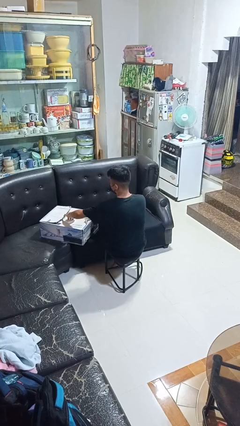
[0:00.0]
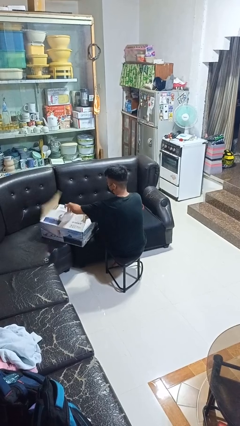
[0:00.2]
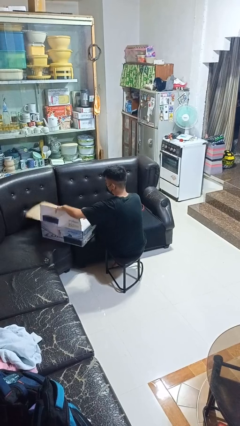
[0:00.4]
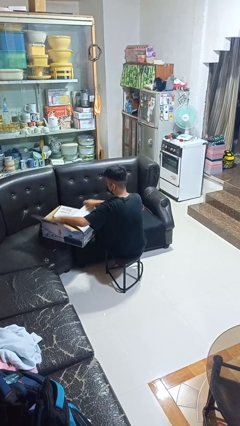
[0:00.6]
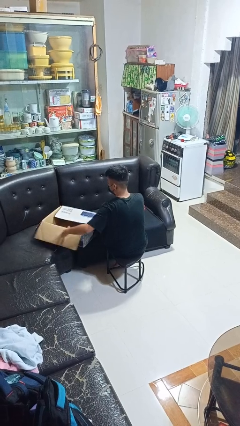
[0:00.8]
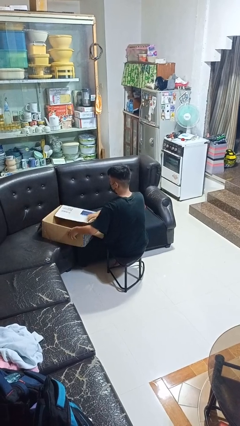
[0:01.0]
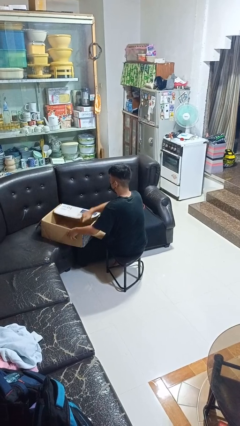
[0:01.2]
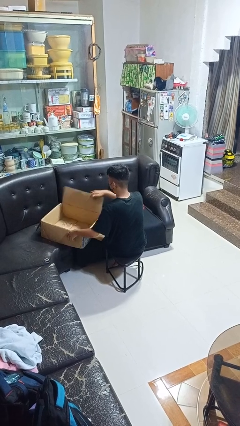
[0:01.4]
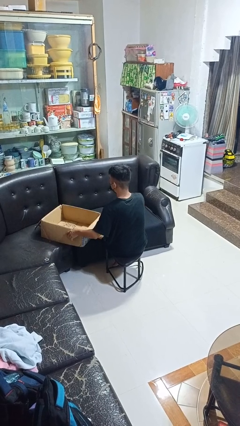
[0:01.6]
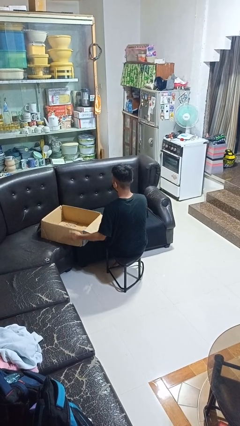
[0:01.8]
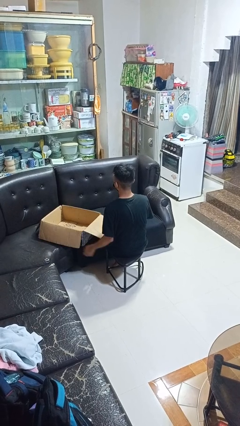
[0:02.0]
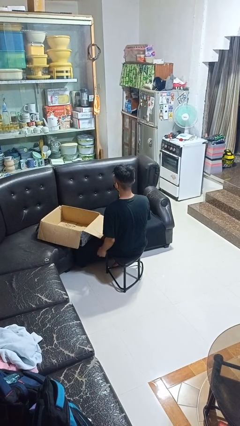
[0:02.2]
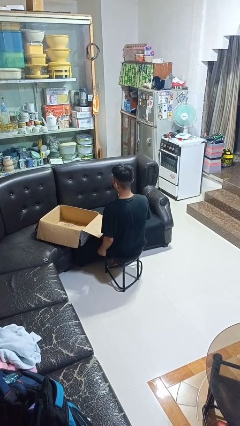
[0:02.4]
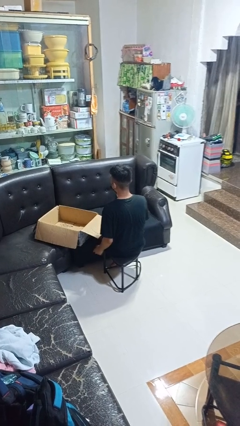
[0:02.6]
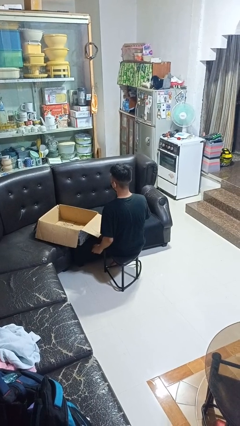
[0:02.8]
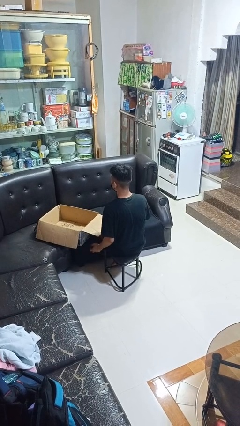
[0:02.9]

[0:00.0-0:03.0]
person opens box

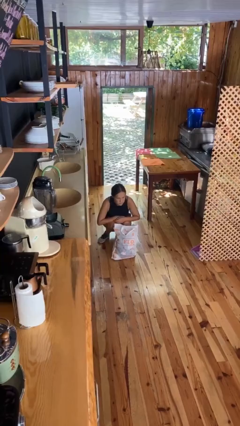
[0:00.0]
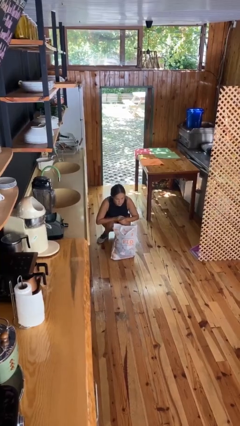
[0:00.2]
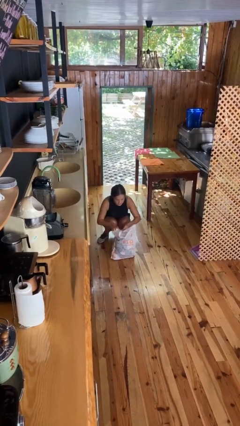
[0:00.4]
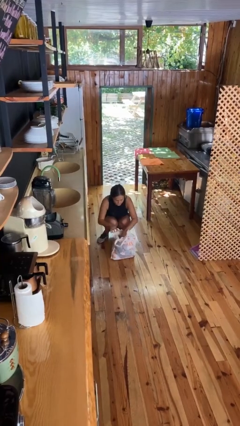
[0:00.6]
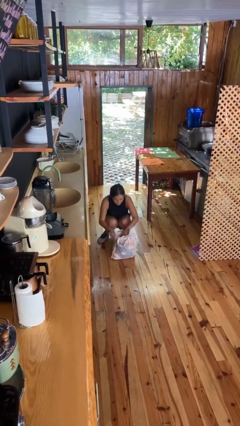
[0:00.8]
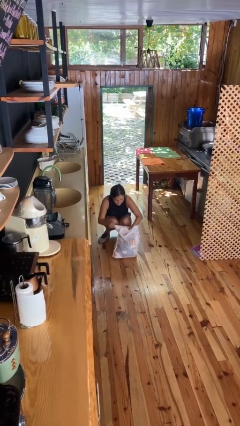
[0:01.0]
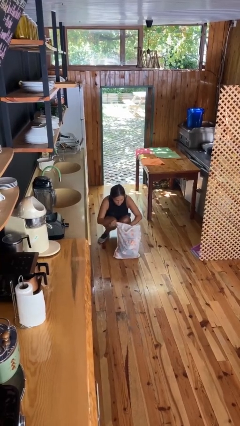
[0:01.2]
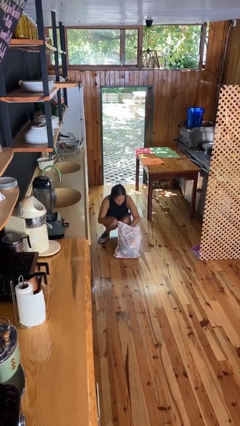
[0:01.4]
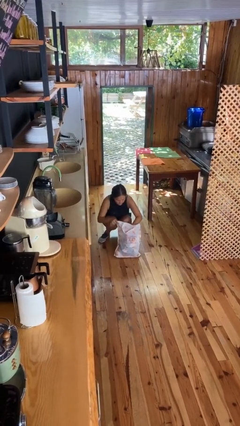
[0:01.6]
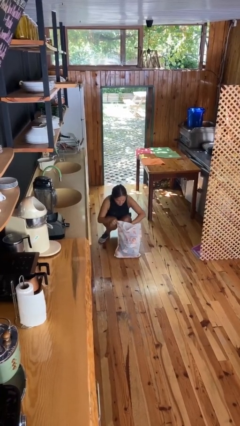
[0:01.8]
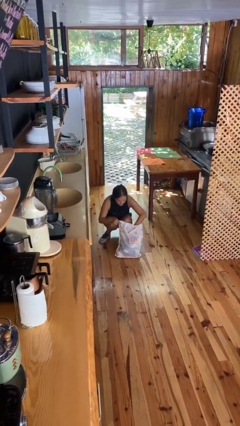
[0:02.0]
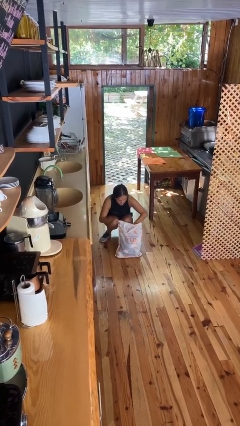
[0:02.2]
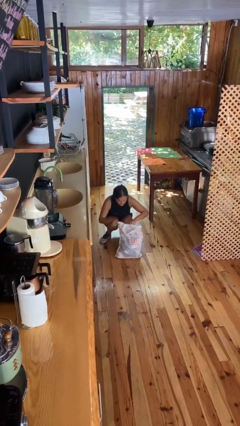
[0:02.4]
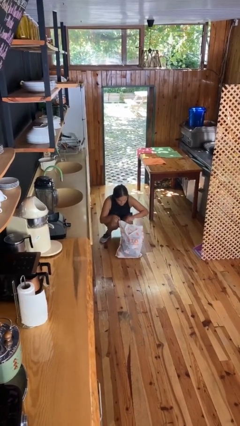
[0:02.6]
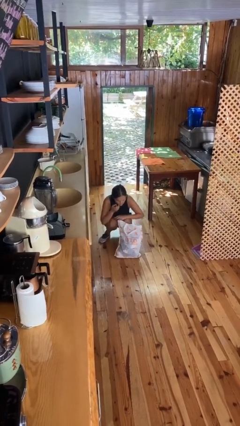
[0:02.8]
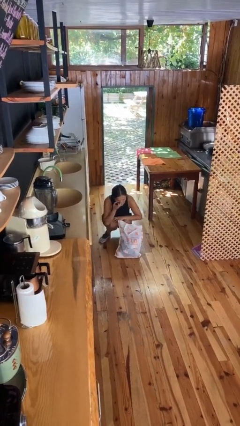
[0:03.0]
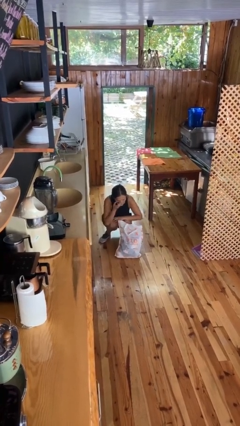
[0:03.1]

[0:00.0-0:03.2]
person searches in bag

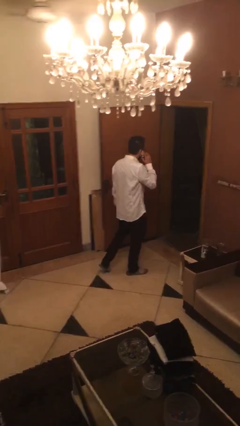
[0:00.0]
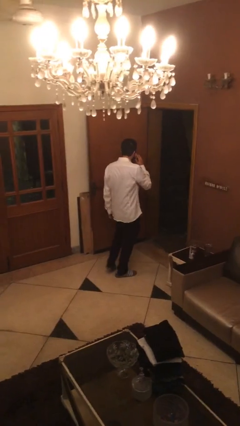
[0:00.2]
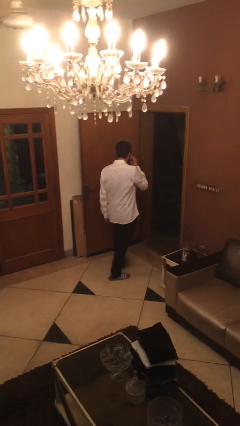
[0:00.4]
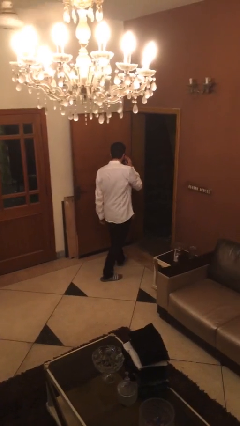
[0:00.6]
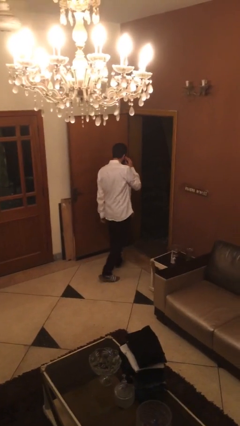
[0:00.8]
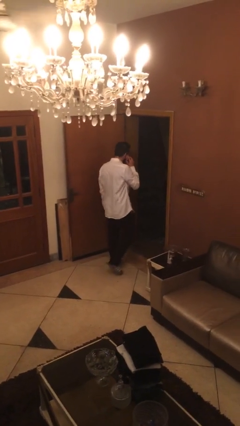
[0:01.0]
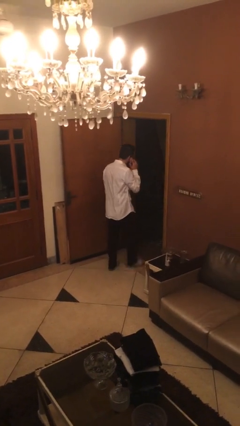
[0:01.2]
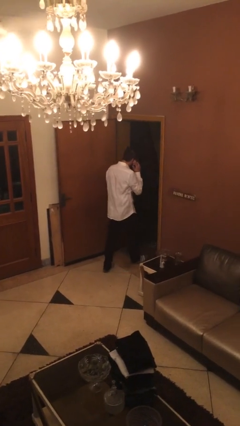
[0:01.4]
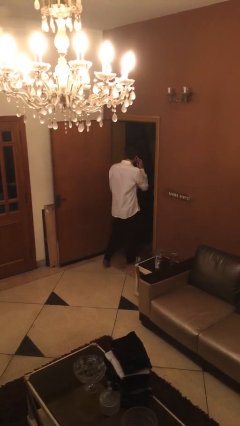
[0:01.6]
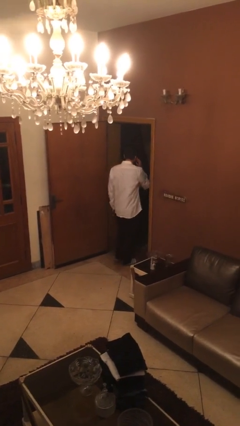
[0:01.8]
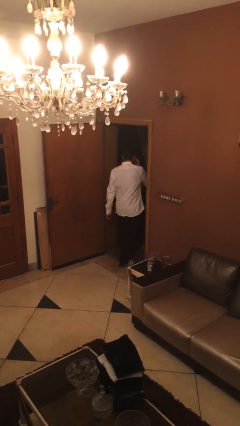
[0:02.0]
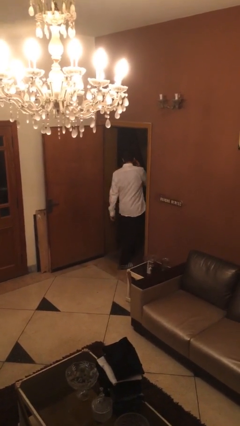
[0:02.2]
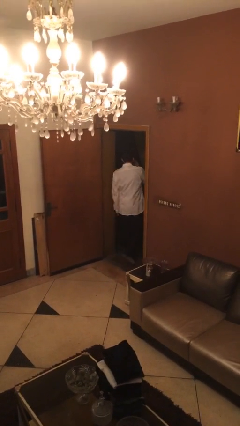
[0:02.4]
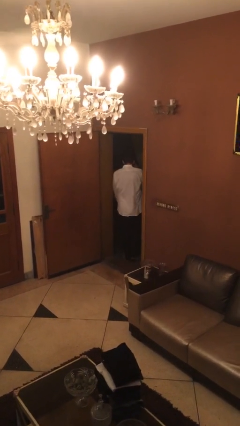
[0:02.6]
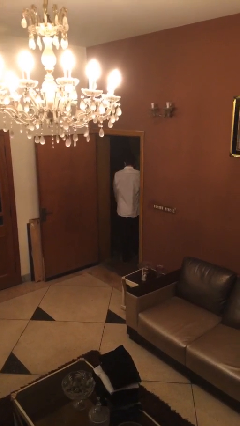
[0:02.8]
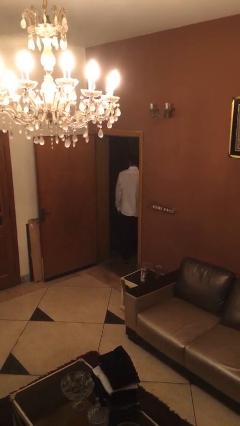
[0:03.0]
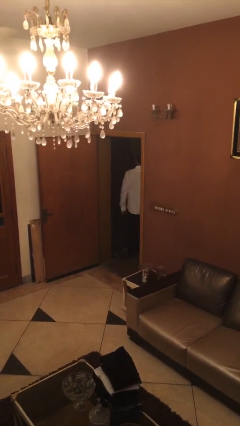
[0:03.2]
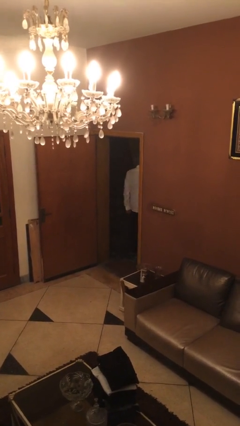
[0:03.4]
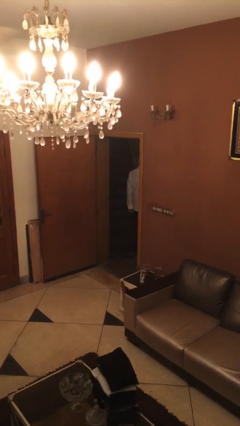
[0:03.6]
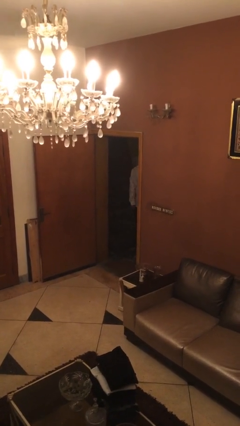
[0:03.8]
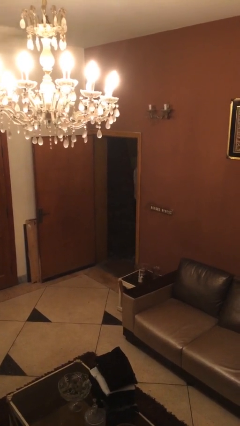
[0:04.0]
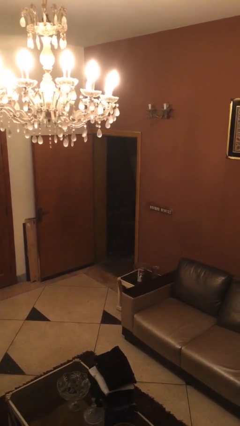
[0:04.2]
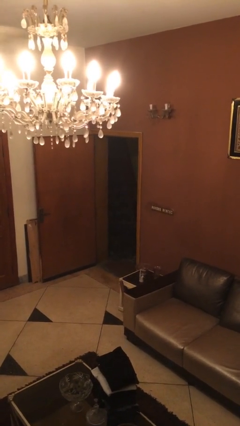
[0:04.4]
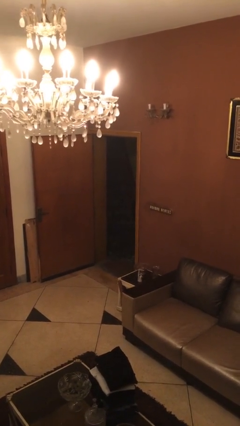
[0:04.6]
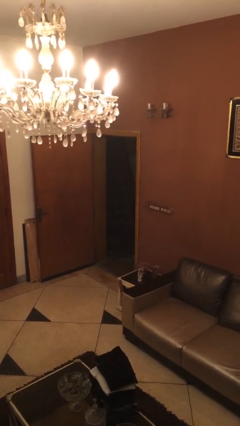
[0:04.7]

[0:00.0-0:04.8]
person exits scene through structure

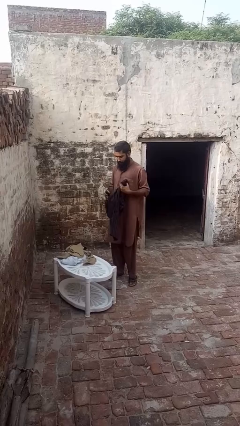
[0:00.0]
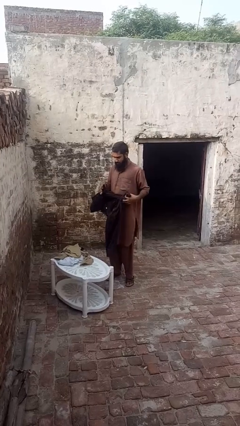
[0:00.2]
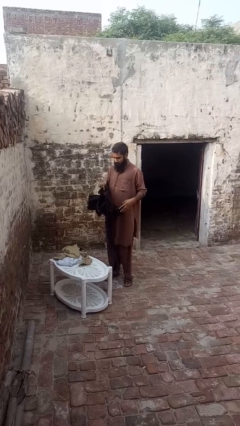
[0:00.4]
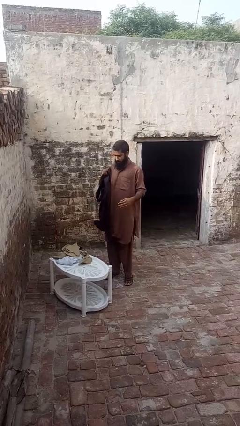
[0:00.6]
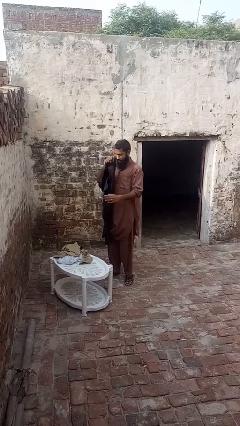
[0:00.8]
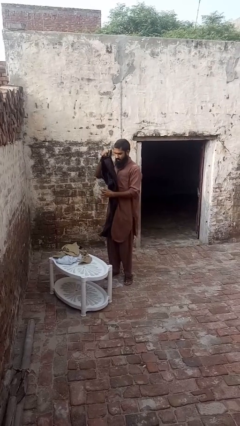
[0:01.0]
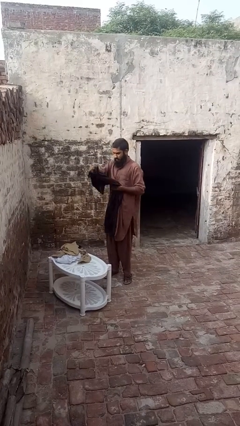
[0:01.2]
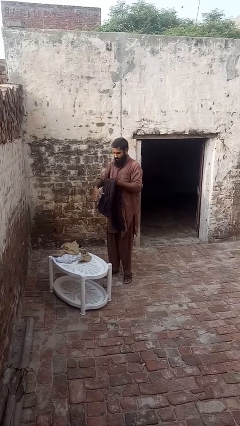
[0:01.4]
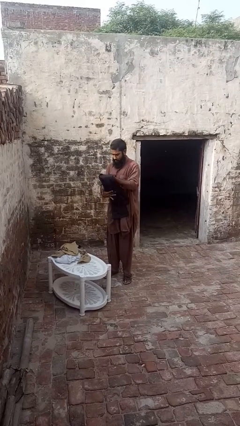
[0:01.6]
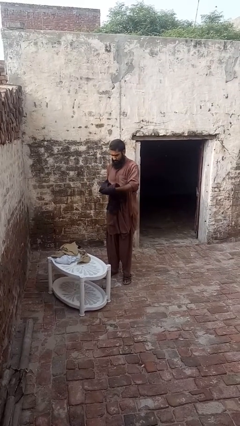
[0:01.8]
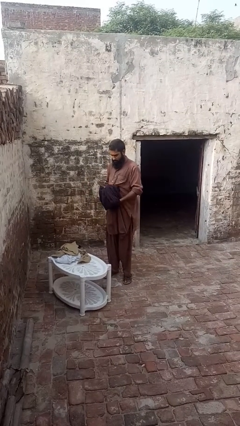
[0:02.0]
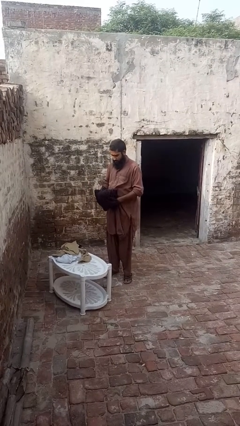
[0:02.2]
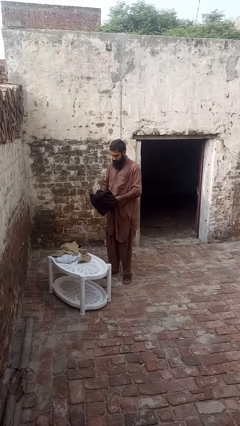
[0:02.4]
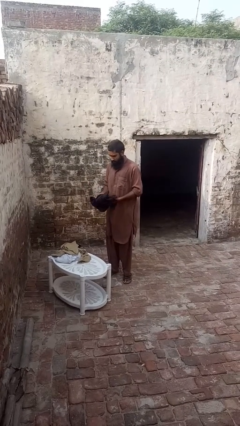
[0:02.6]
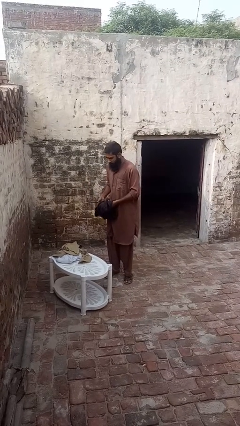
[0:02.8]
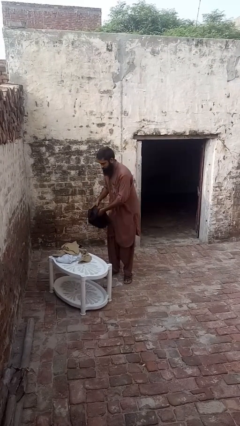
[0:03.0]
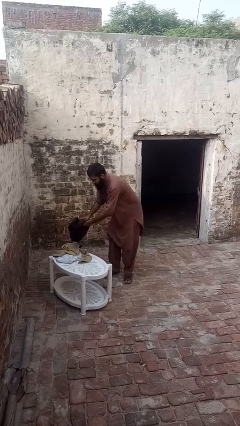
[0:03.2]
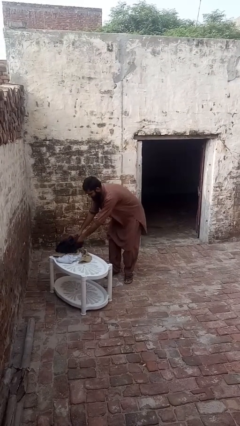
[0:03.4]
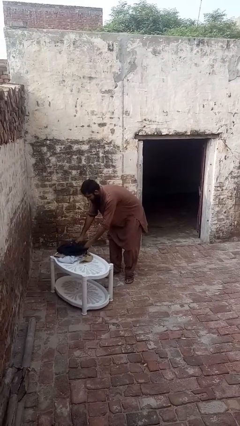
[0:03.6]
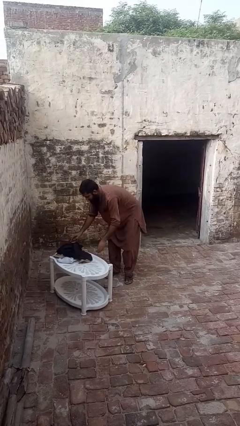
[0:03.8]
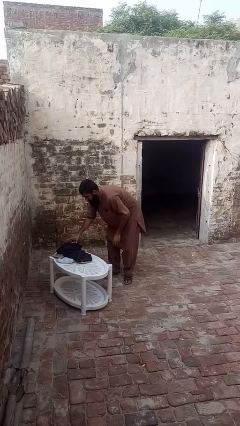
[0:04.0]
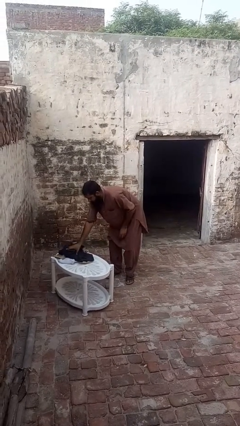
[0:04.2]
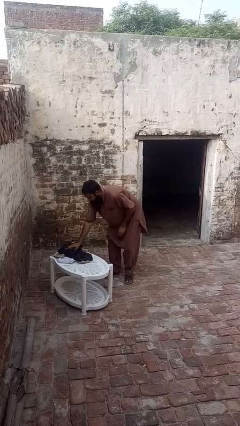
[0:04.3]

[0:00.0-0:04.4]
person folds pants

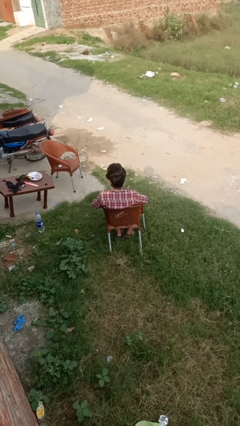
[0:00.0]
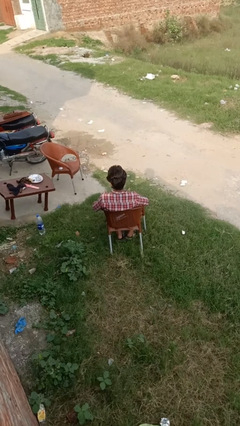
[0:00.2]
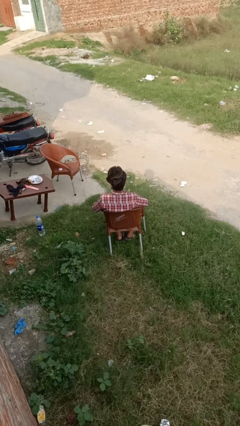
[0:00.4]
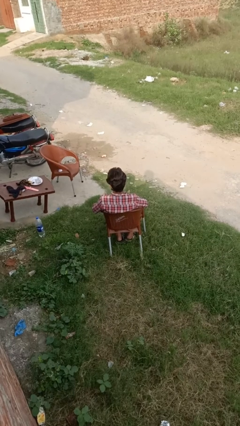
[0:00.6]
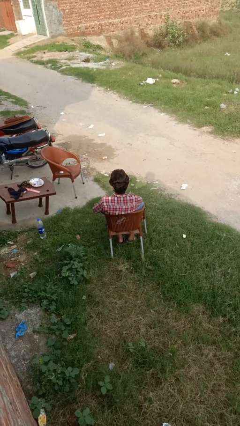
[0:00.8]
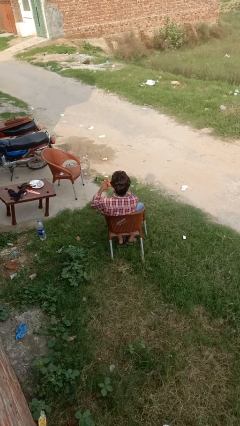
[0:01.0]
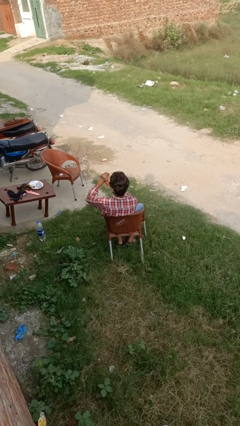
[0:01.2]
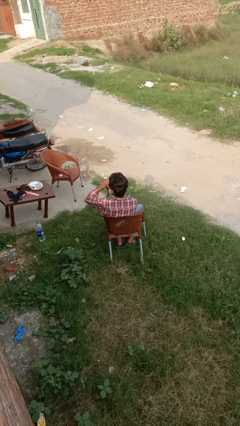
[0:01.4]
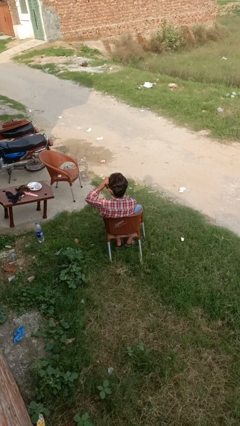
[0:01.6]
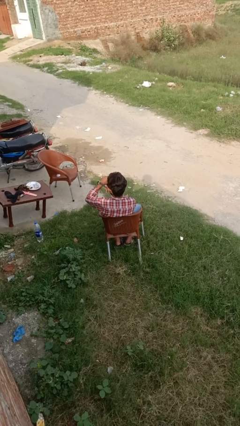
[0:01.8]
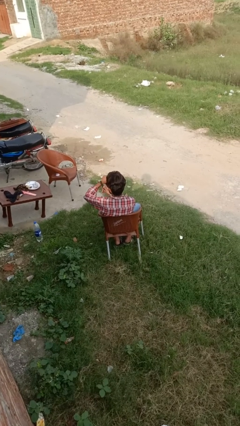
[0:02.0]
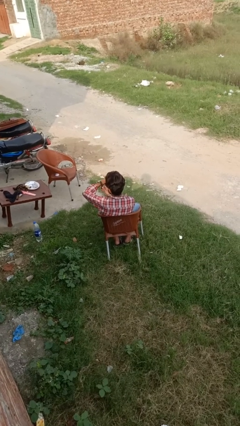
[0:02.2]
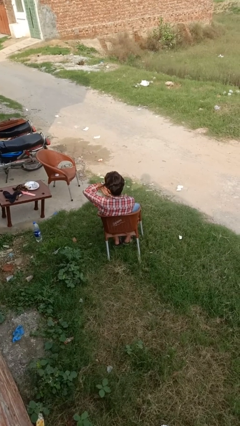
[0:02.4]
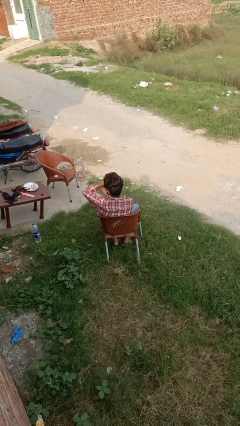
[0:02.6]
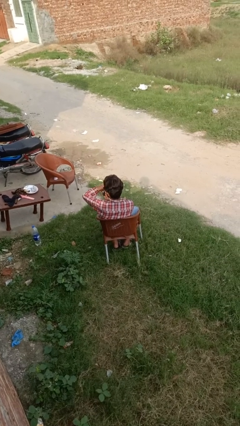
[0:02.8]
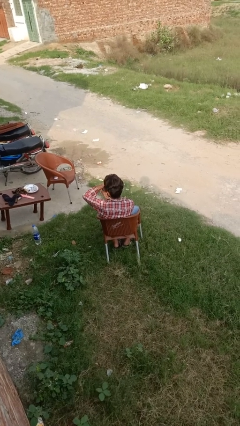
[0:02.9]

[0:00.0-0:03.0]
person puts on wristwatch
